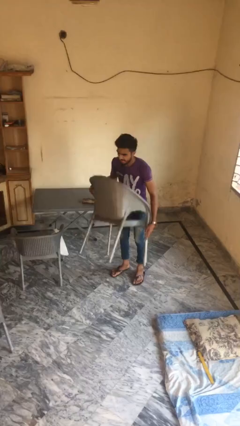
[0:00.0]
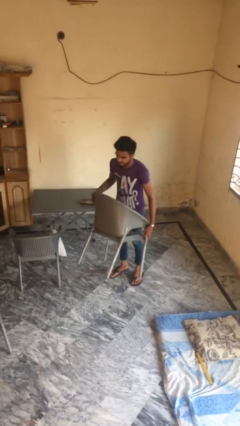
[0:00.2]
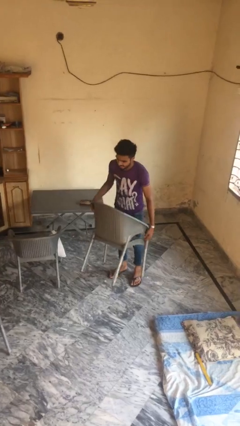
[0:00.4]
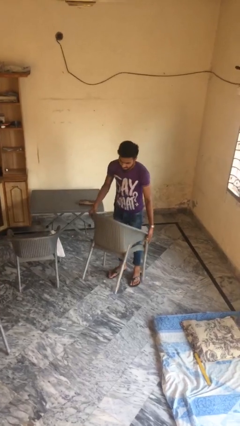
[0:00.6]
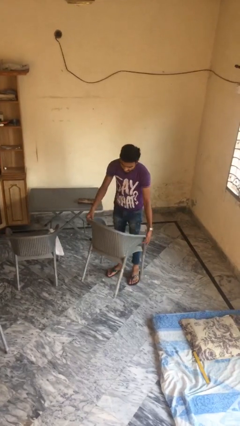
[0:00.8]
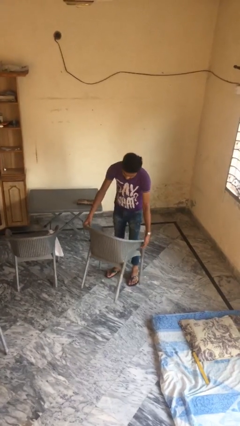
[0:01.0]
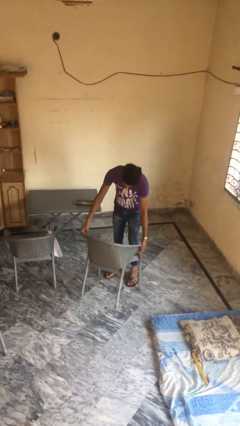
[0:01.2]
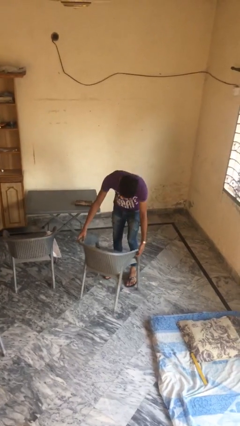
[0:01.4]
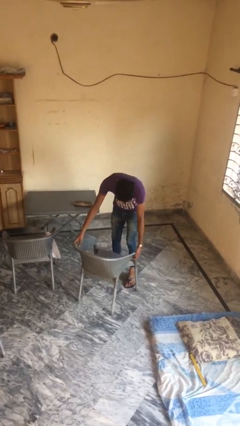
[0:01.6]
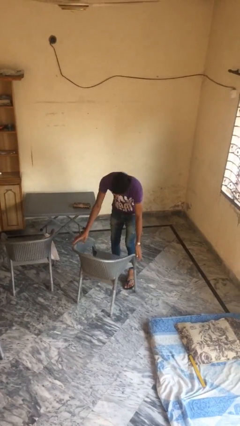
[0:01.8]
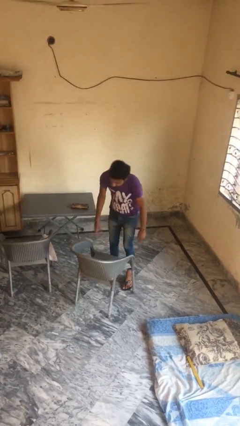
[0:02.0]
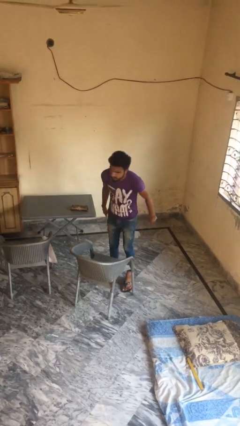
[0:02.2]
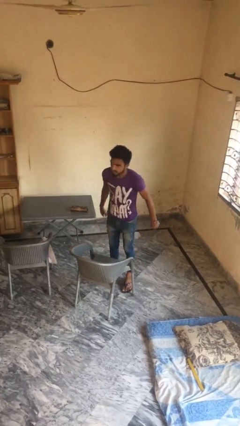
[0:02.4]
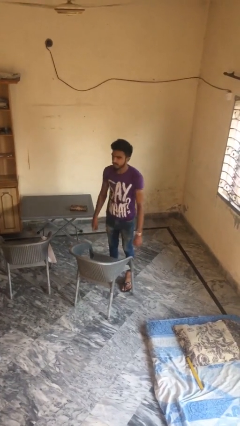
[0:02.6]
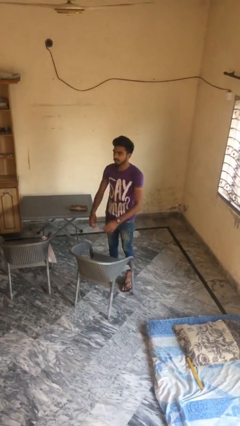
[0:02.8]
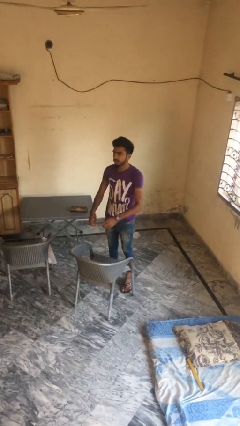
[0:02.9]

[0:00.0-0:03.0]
person puts down object on floor

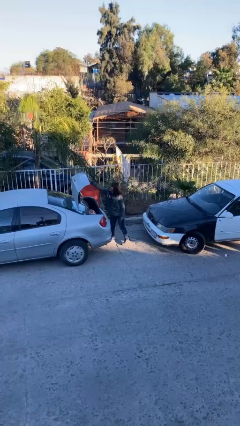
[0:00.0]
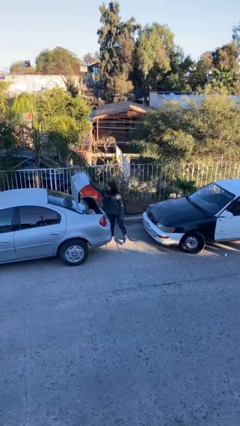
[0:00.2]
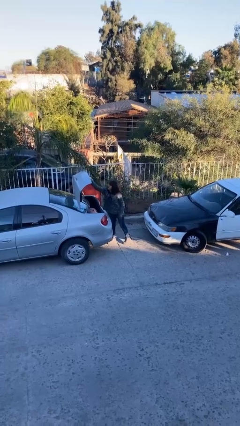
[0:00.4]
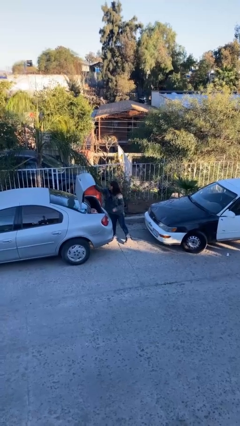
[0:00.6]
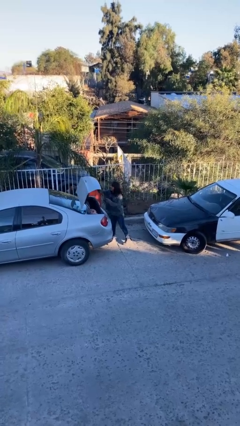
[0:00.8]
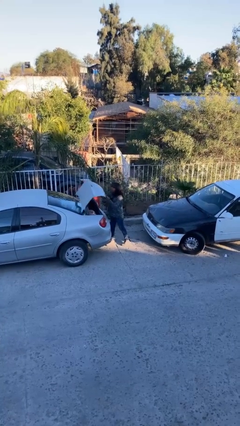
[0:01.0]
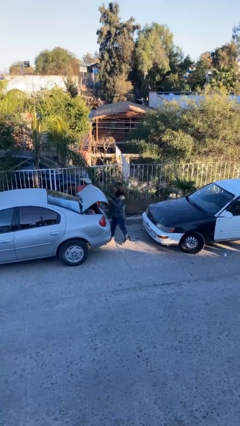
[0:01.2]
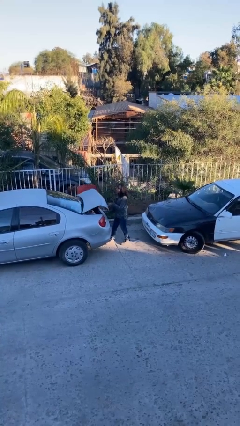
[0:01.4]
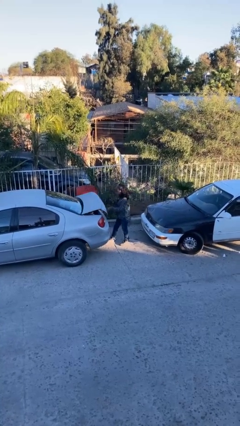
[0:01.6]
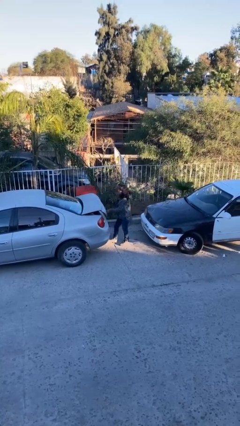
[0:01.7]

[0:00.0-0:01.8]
person closes car trunk

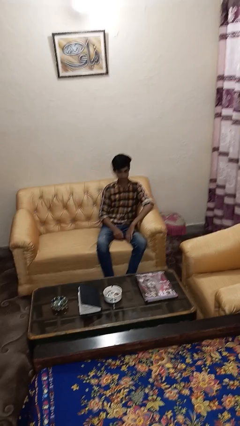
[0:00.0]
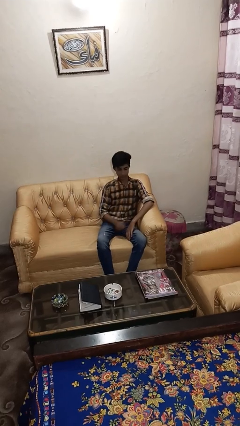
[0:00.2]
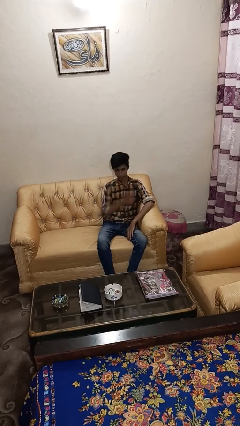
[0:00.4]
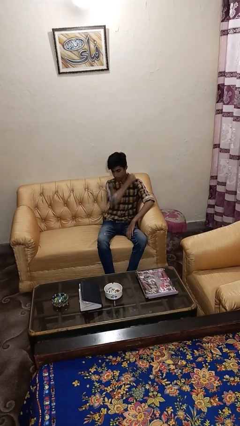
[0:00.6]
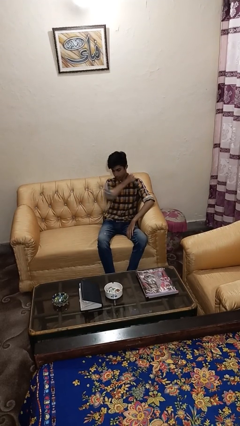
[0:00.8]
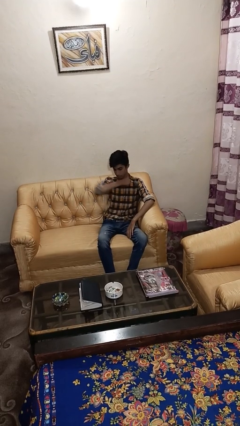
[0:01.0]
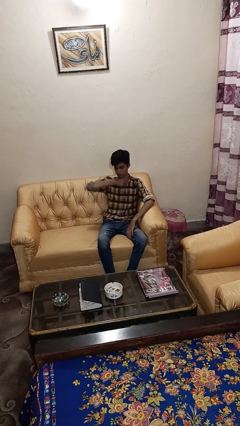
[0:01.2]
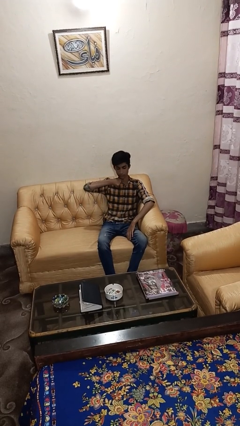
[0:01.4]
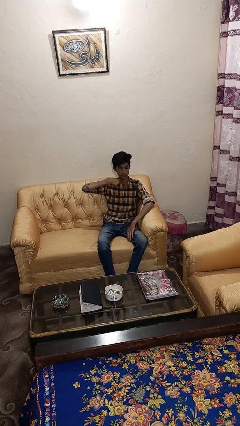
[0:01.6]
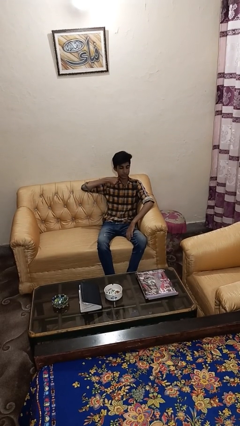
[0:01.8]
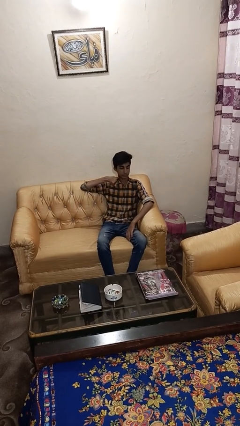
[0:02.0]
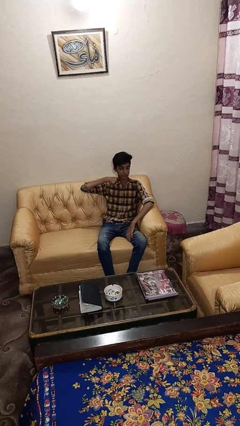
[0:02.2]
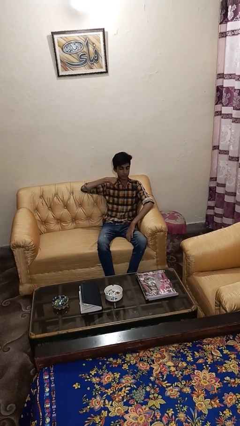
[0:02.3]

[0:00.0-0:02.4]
person gestures cut

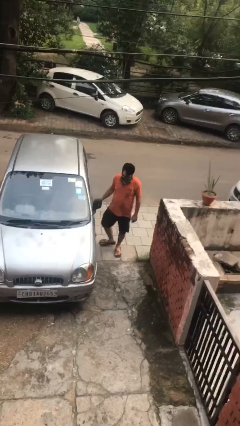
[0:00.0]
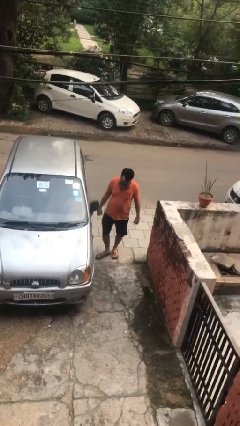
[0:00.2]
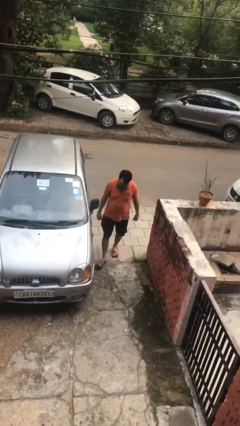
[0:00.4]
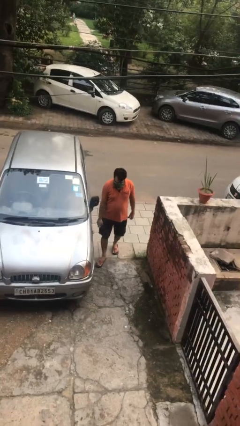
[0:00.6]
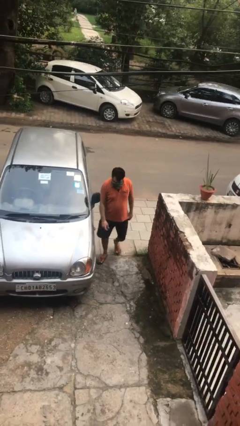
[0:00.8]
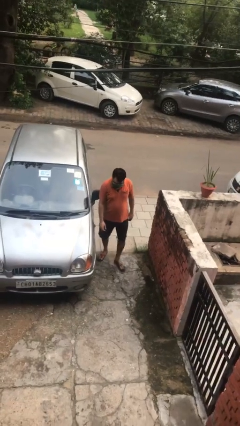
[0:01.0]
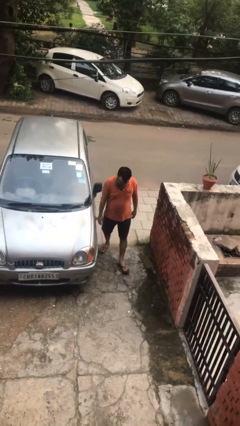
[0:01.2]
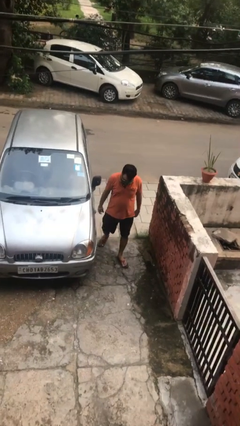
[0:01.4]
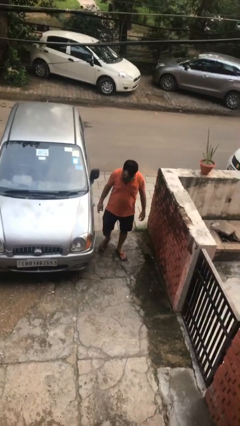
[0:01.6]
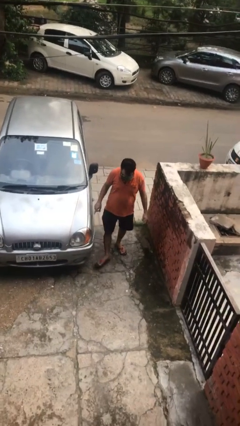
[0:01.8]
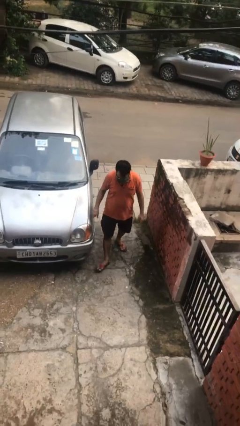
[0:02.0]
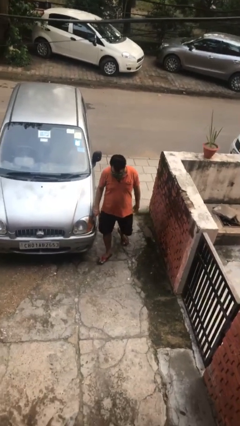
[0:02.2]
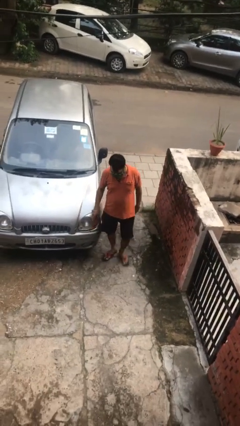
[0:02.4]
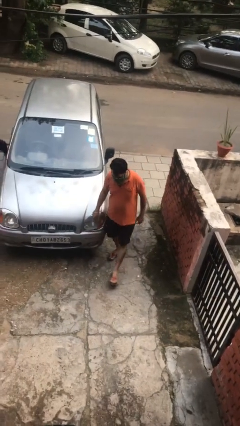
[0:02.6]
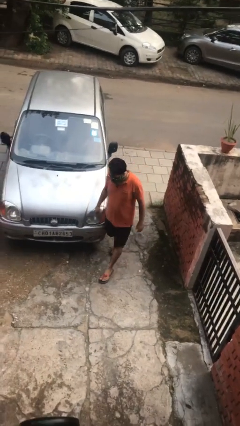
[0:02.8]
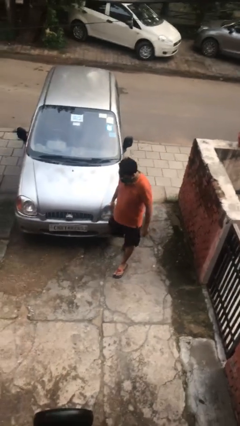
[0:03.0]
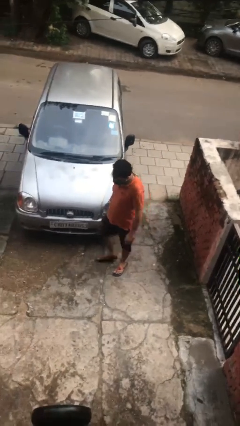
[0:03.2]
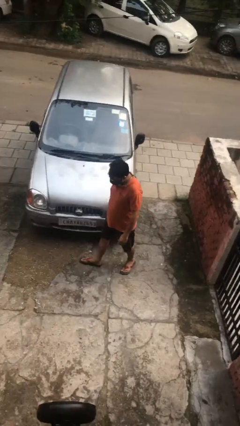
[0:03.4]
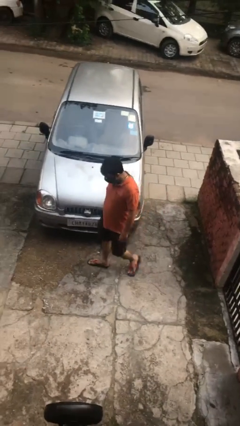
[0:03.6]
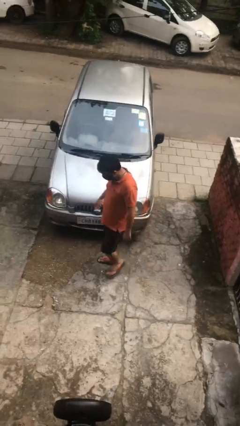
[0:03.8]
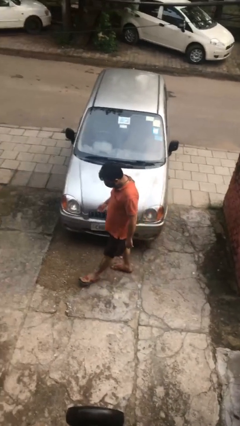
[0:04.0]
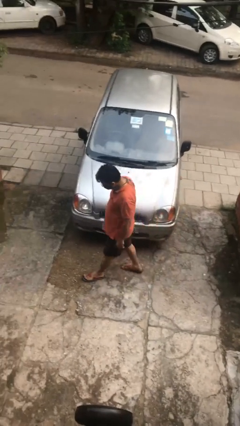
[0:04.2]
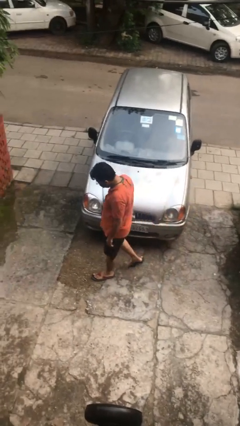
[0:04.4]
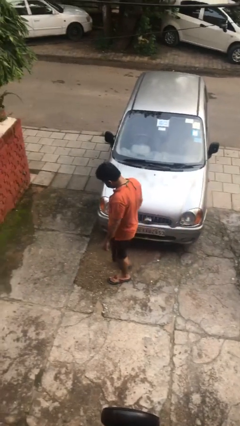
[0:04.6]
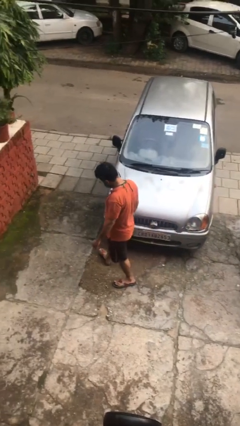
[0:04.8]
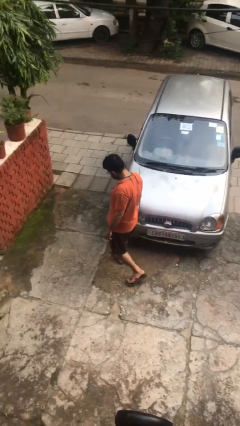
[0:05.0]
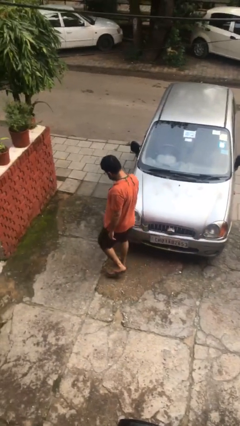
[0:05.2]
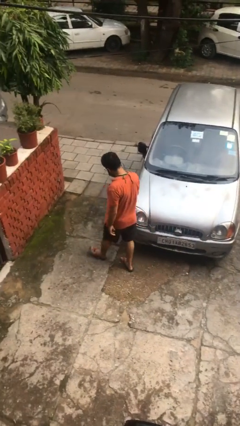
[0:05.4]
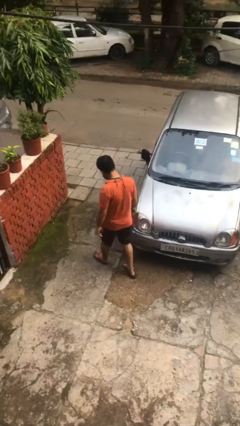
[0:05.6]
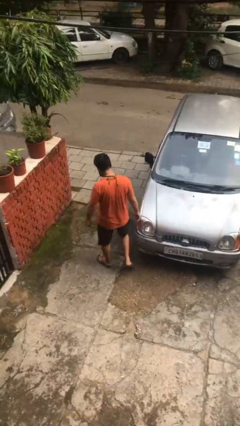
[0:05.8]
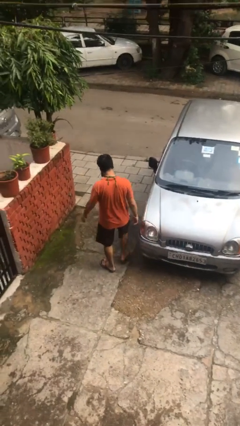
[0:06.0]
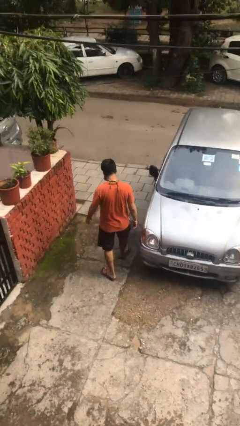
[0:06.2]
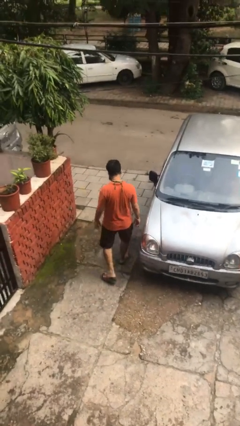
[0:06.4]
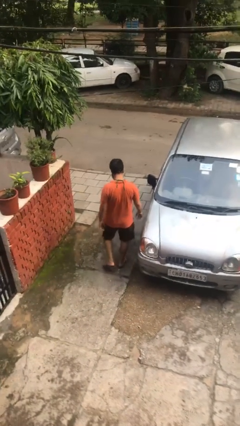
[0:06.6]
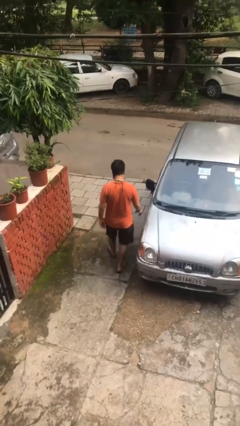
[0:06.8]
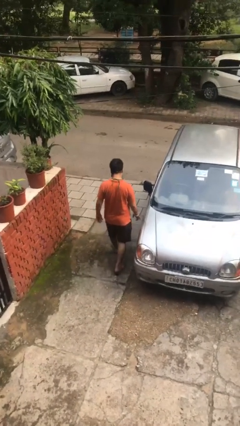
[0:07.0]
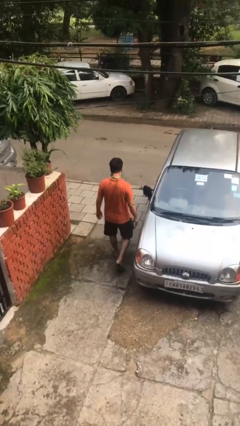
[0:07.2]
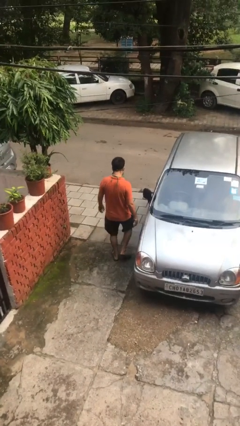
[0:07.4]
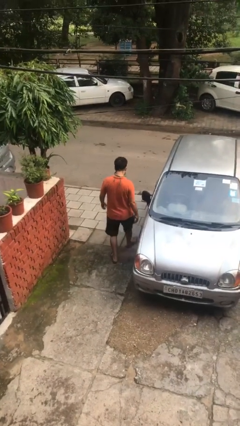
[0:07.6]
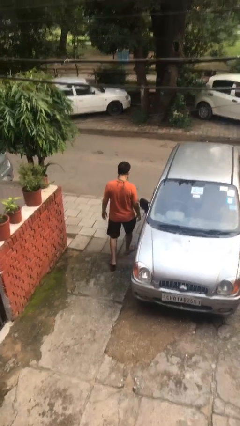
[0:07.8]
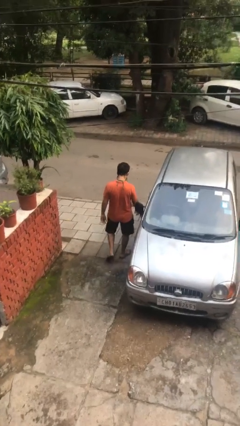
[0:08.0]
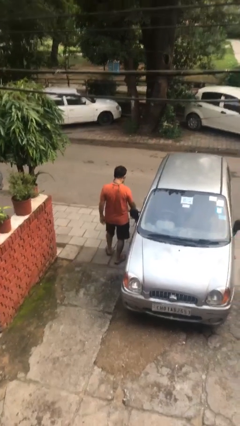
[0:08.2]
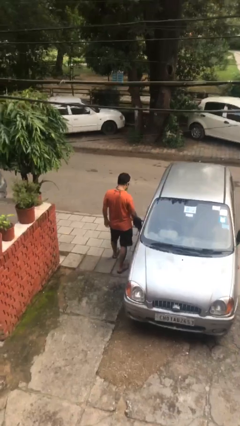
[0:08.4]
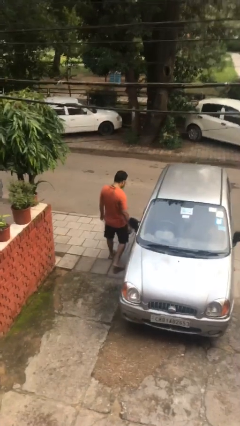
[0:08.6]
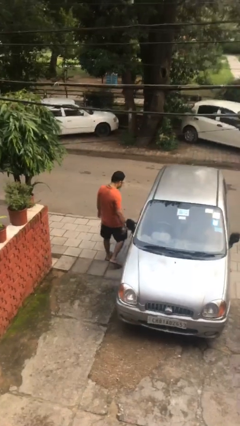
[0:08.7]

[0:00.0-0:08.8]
person walks around car

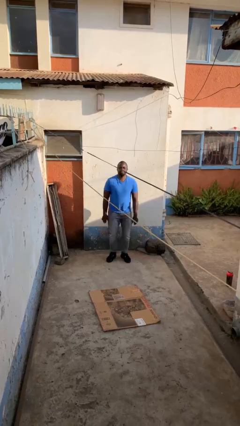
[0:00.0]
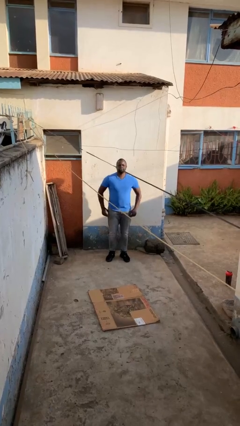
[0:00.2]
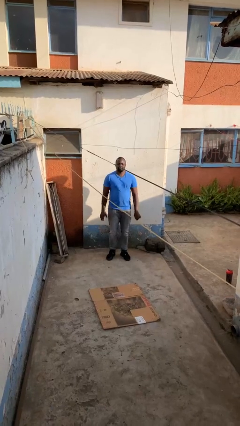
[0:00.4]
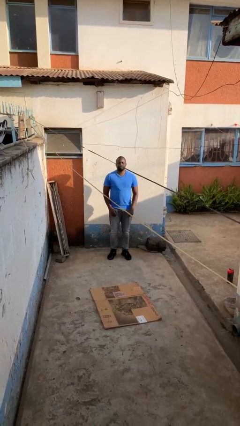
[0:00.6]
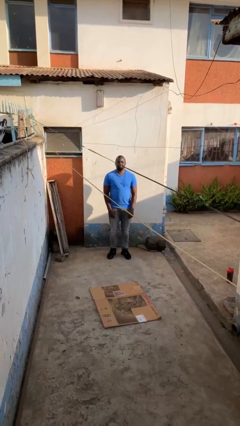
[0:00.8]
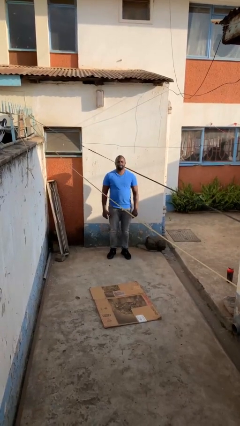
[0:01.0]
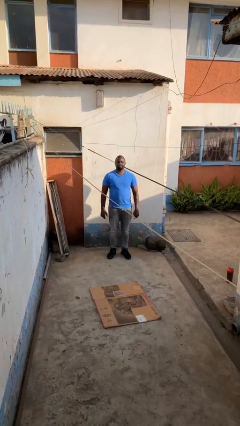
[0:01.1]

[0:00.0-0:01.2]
person jumps

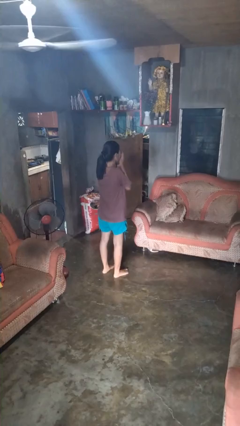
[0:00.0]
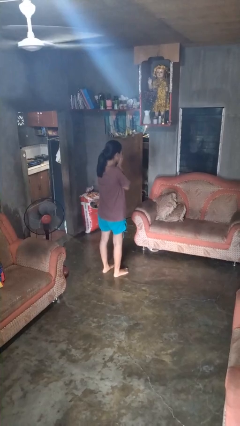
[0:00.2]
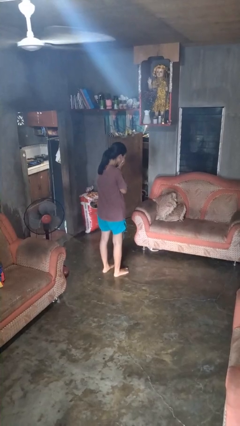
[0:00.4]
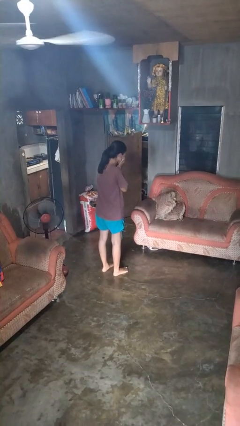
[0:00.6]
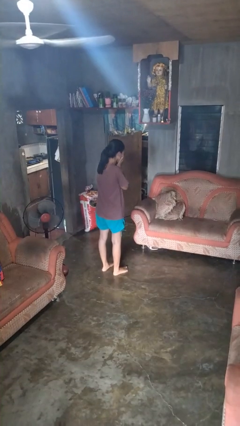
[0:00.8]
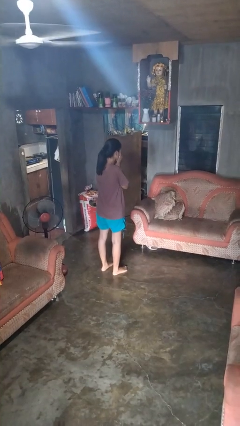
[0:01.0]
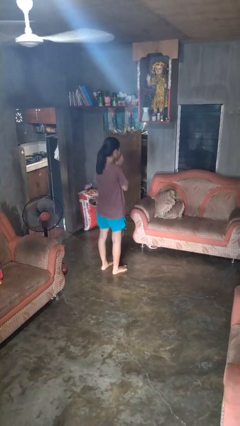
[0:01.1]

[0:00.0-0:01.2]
person sneezes into hand
